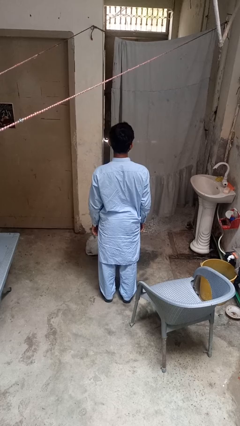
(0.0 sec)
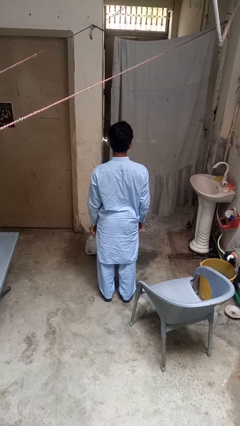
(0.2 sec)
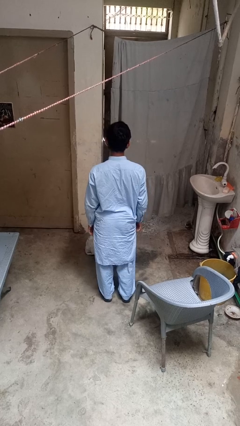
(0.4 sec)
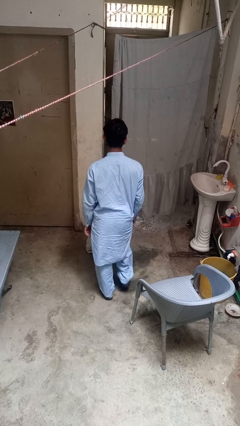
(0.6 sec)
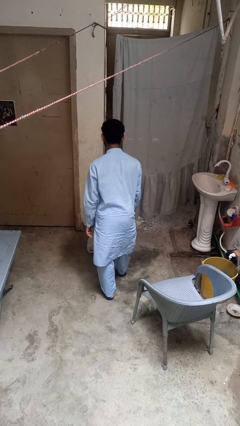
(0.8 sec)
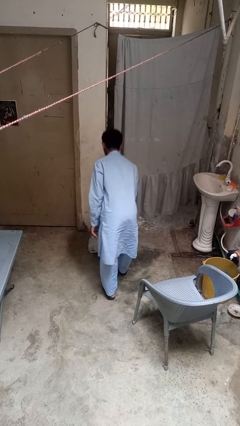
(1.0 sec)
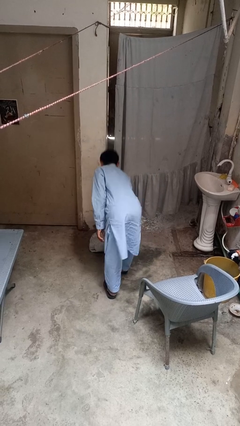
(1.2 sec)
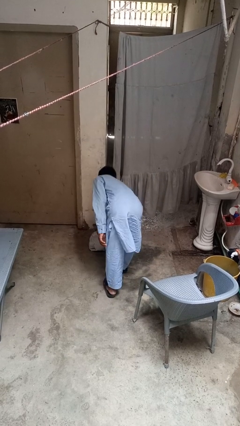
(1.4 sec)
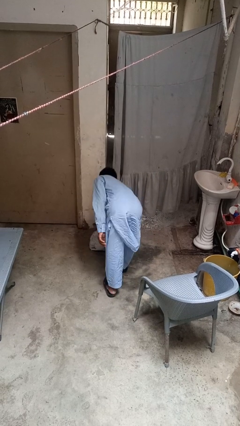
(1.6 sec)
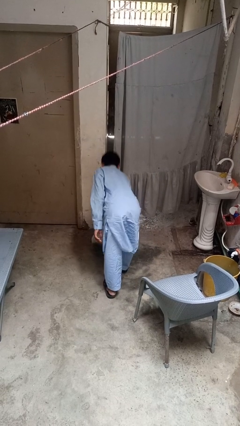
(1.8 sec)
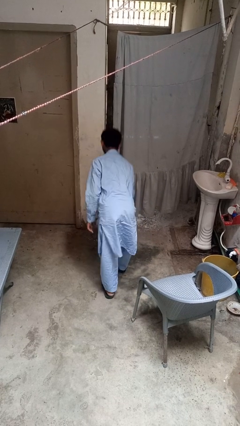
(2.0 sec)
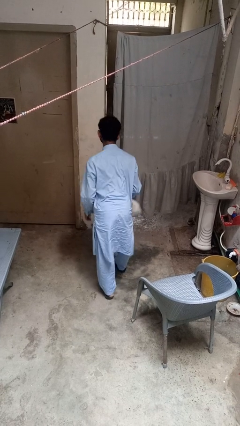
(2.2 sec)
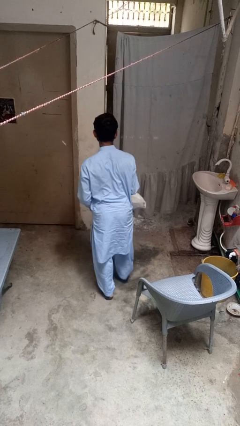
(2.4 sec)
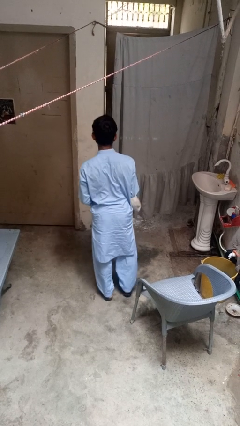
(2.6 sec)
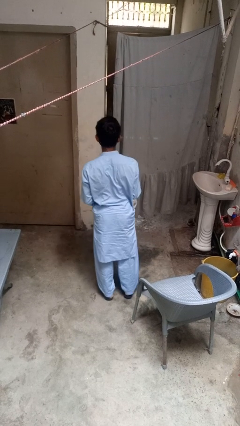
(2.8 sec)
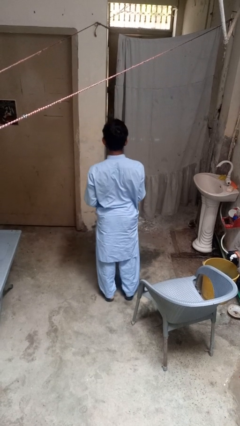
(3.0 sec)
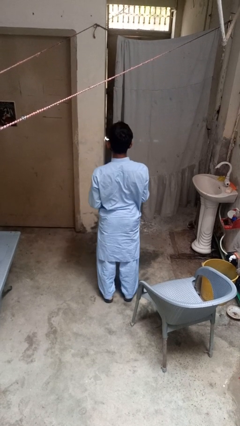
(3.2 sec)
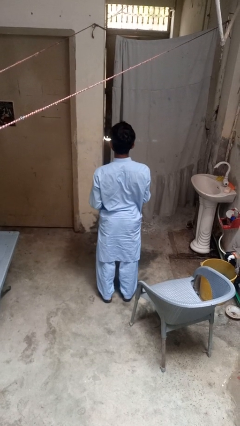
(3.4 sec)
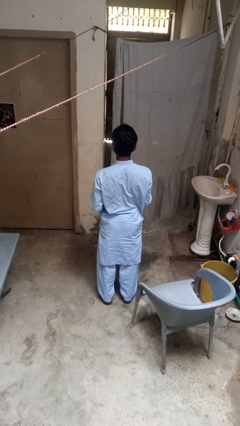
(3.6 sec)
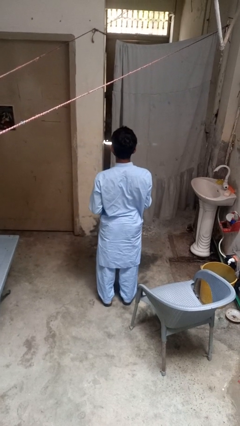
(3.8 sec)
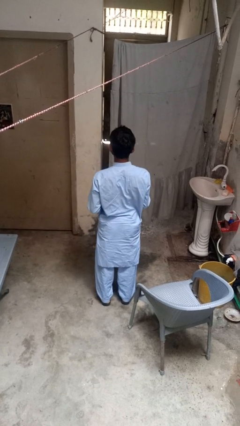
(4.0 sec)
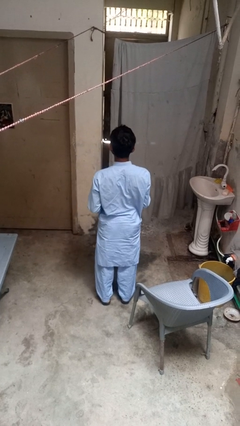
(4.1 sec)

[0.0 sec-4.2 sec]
person picks up object from floor

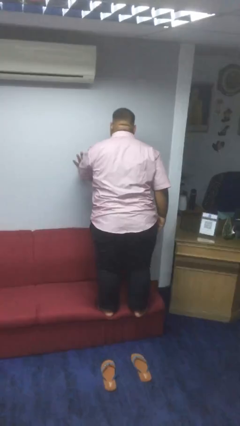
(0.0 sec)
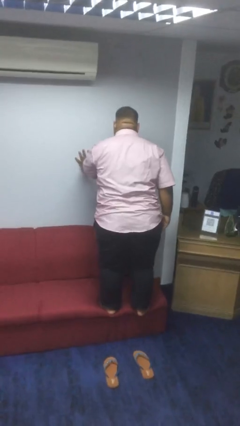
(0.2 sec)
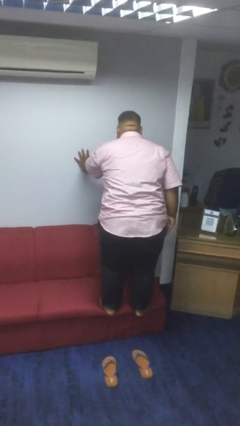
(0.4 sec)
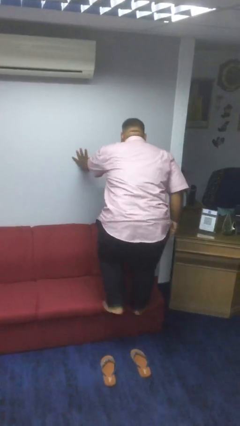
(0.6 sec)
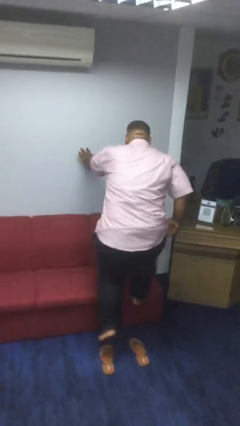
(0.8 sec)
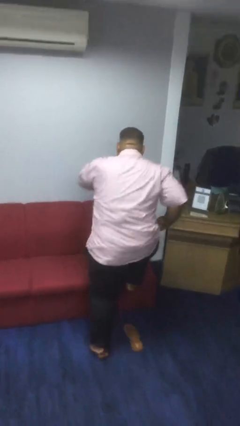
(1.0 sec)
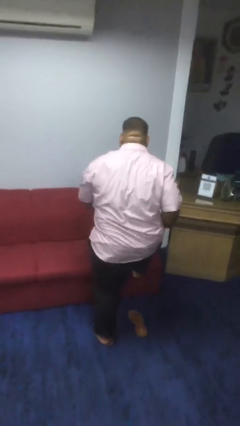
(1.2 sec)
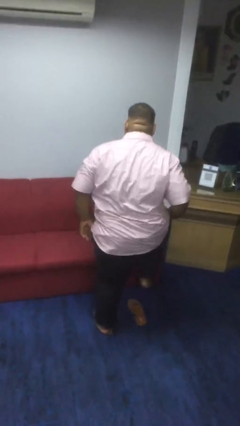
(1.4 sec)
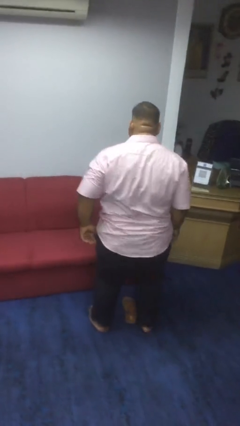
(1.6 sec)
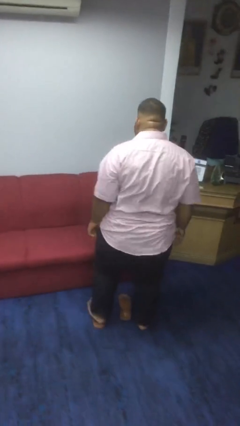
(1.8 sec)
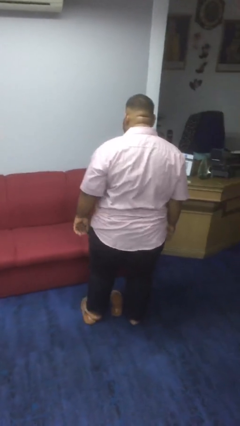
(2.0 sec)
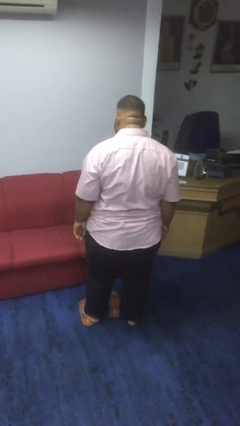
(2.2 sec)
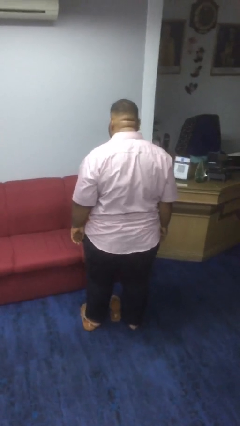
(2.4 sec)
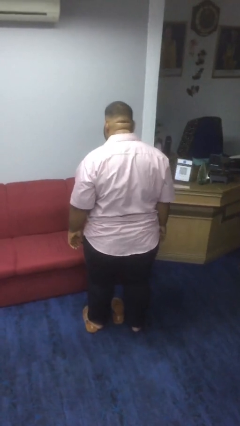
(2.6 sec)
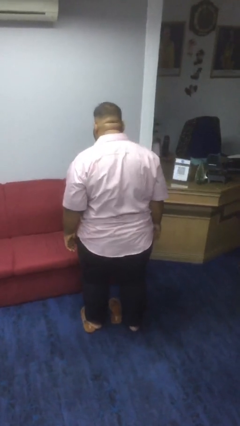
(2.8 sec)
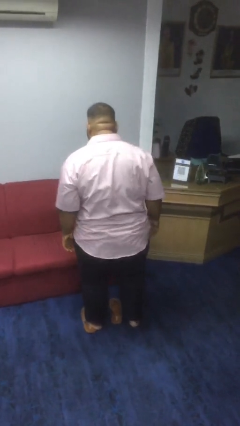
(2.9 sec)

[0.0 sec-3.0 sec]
person climbs off couch

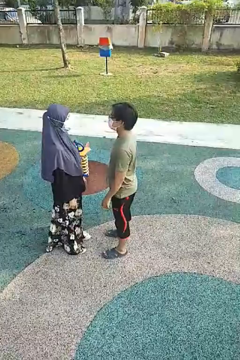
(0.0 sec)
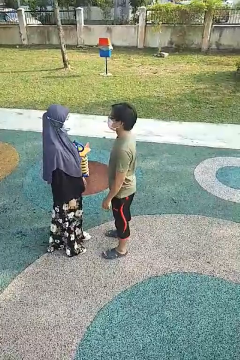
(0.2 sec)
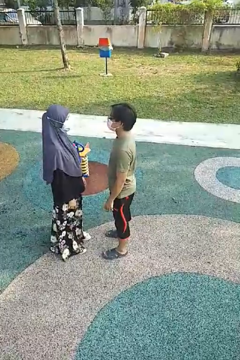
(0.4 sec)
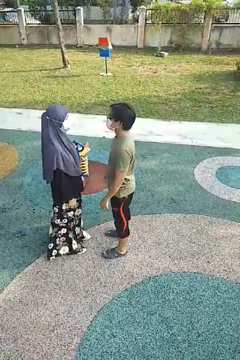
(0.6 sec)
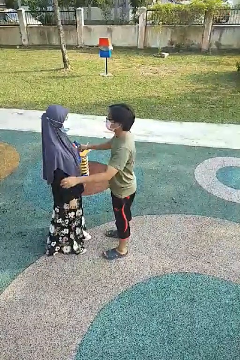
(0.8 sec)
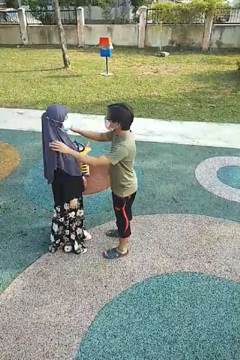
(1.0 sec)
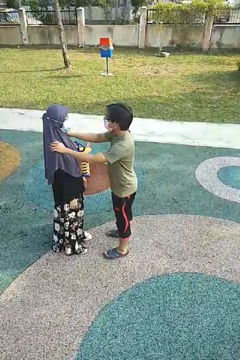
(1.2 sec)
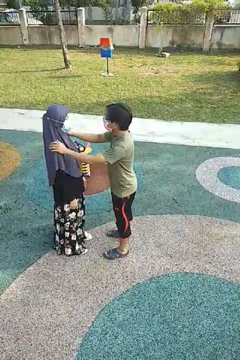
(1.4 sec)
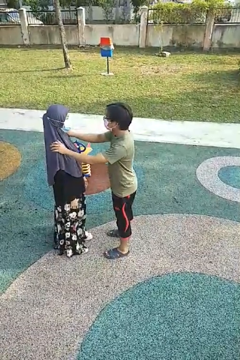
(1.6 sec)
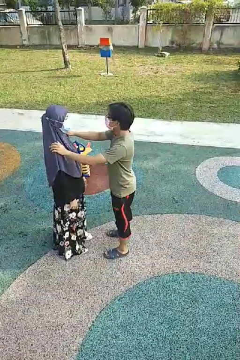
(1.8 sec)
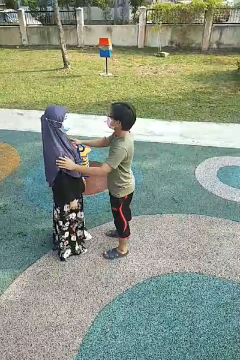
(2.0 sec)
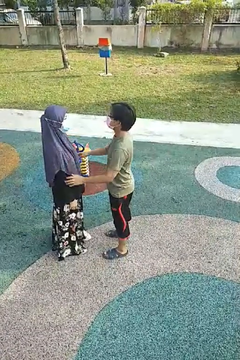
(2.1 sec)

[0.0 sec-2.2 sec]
person pounds shoulders of person

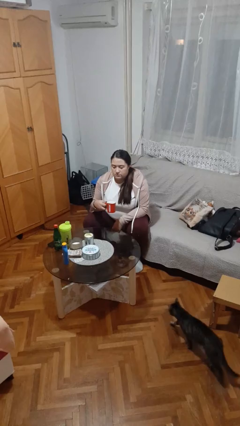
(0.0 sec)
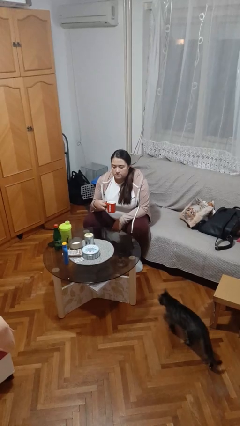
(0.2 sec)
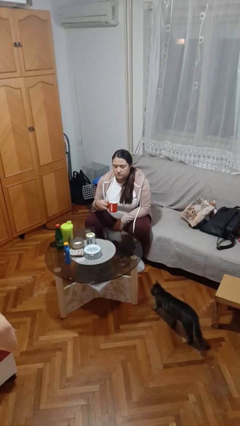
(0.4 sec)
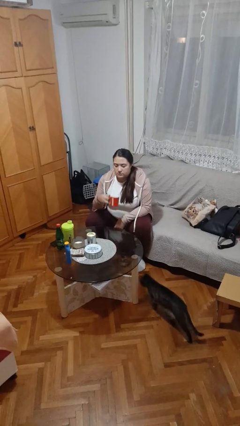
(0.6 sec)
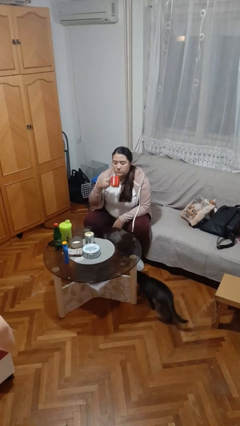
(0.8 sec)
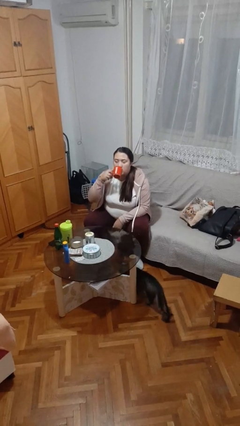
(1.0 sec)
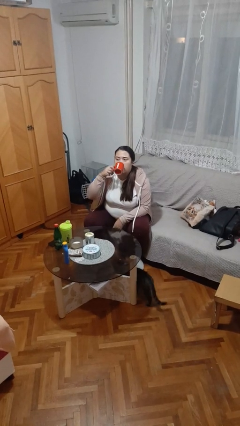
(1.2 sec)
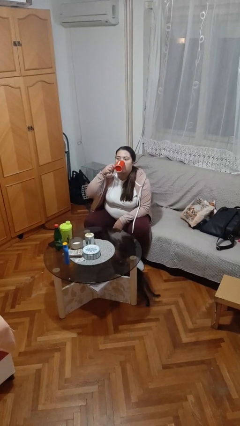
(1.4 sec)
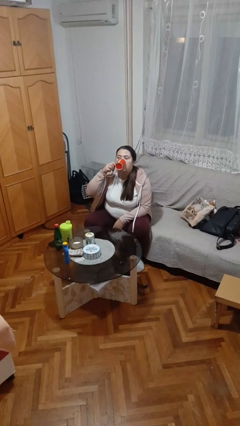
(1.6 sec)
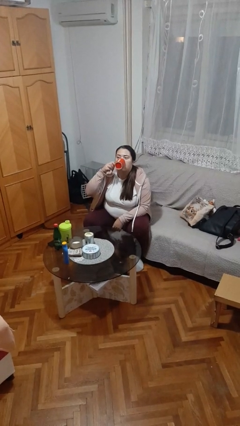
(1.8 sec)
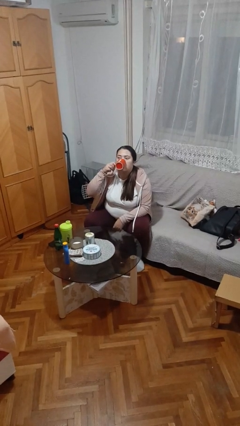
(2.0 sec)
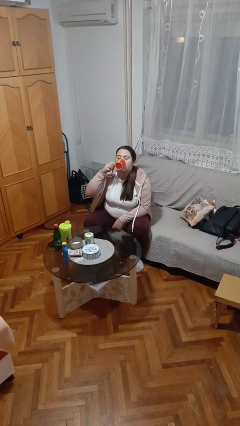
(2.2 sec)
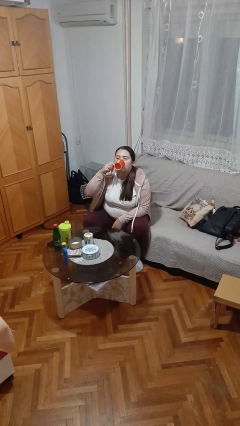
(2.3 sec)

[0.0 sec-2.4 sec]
person drinks from mug

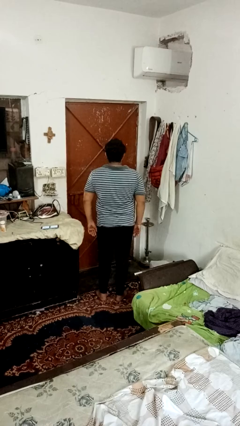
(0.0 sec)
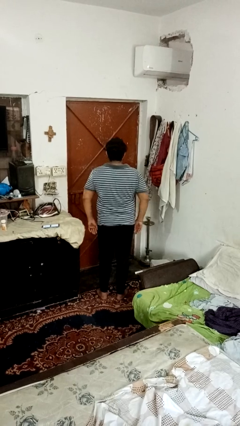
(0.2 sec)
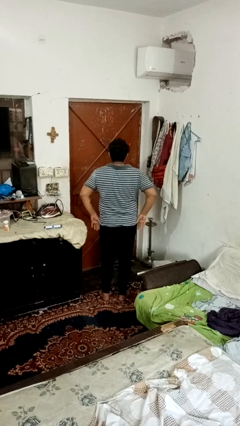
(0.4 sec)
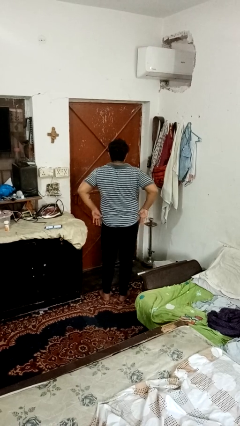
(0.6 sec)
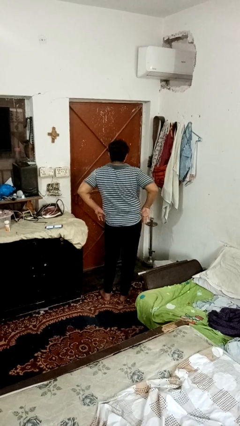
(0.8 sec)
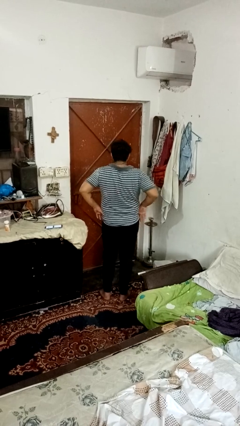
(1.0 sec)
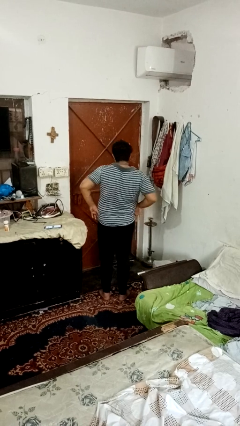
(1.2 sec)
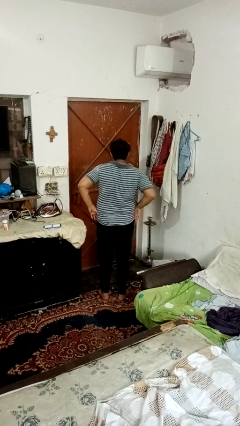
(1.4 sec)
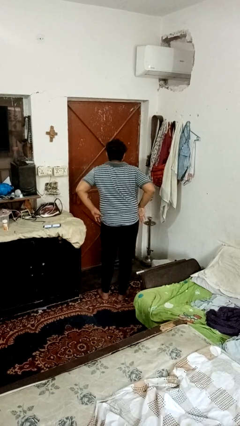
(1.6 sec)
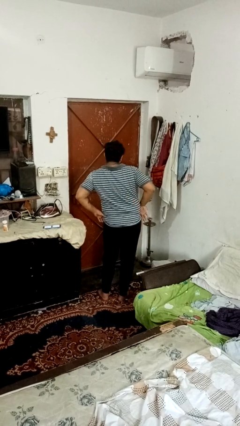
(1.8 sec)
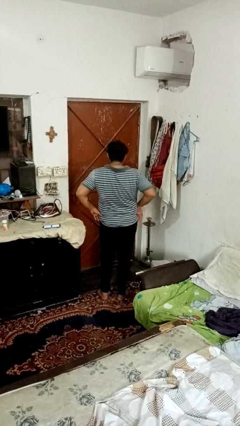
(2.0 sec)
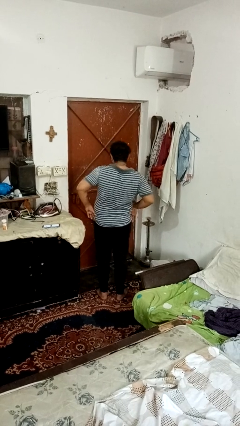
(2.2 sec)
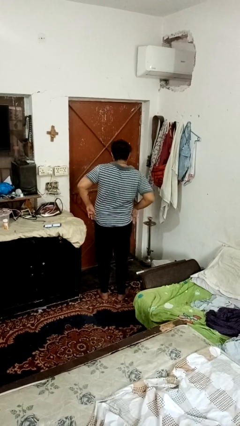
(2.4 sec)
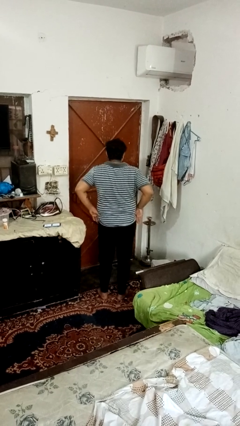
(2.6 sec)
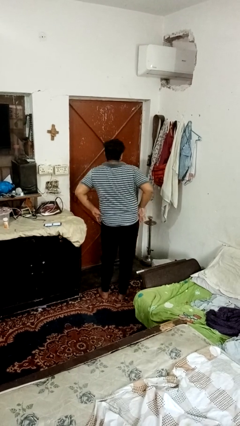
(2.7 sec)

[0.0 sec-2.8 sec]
person wiggles hips

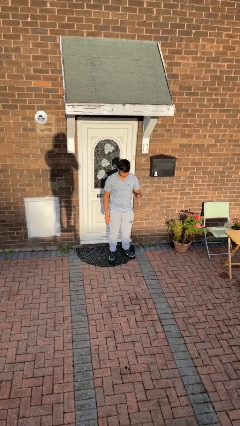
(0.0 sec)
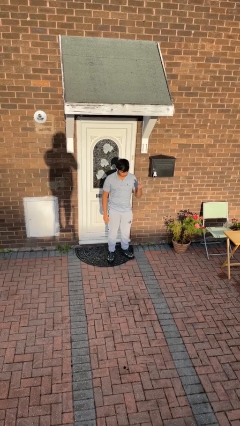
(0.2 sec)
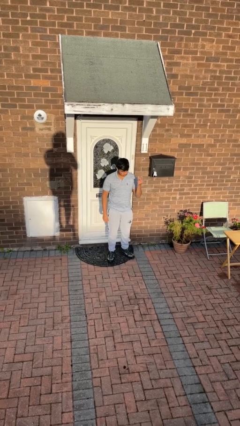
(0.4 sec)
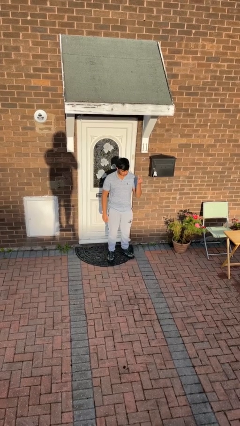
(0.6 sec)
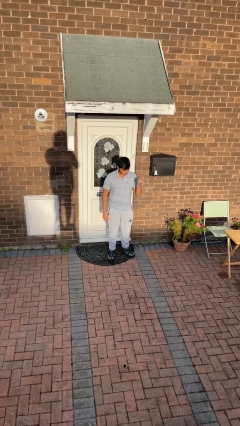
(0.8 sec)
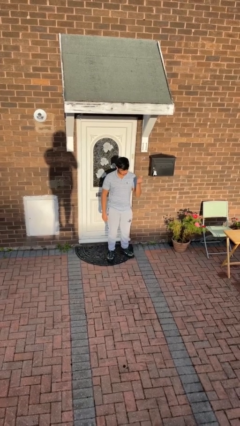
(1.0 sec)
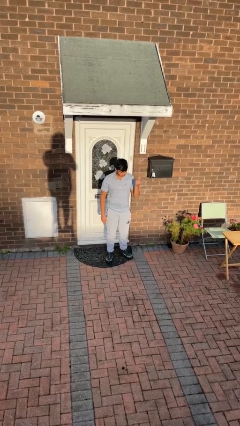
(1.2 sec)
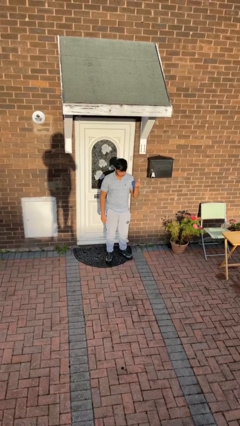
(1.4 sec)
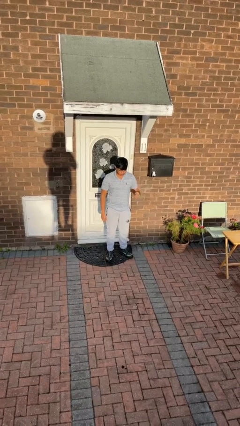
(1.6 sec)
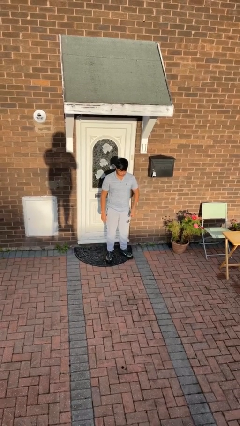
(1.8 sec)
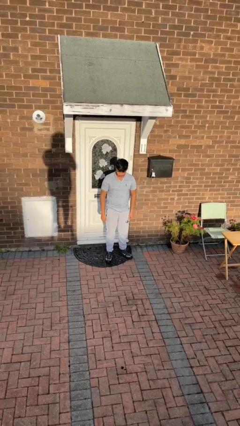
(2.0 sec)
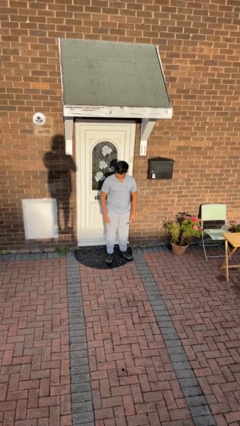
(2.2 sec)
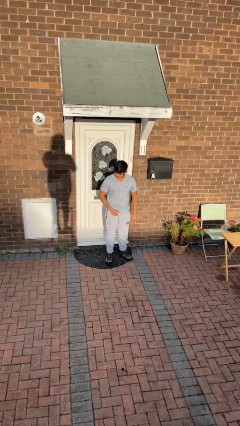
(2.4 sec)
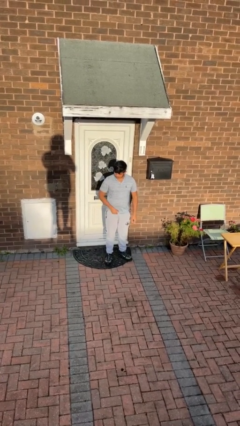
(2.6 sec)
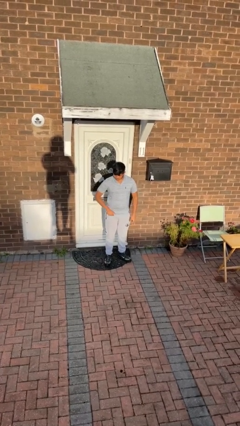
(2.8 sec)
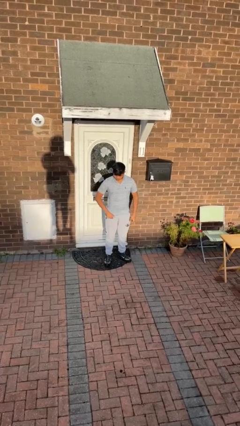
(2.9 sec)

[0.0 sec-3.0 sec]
person snaps fingers
